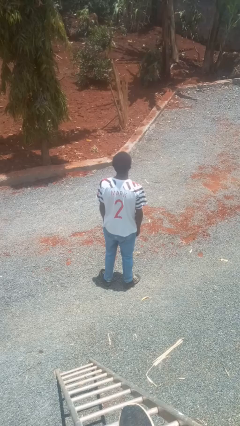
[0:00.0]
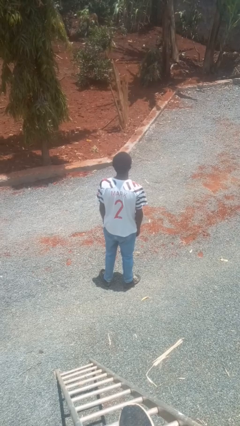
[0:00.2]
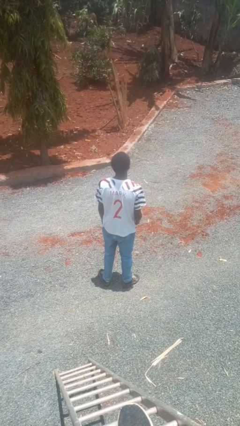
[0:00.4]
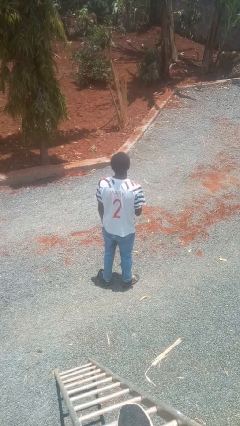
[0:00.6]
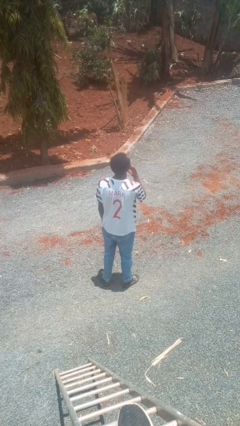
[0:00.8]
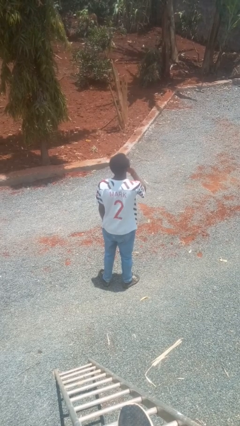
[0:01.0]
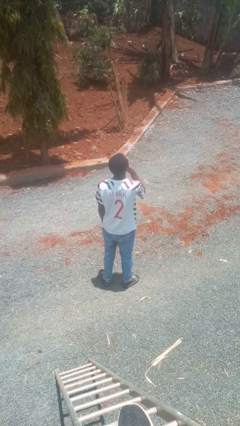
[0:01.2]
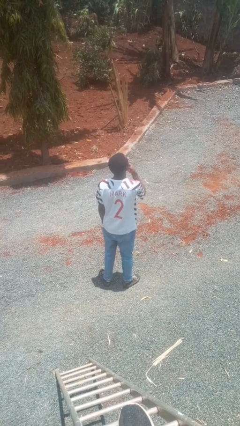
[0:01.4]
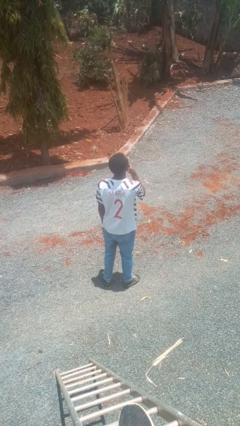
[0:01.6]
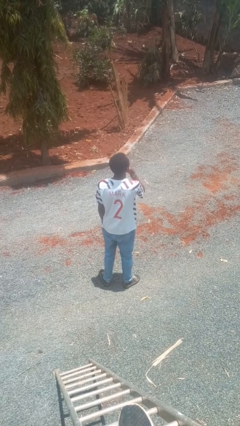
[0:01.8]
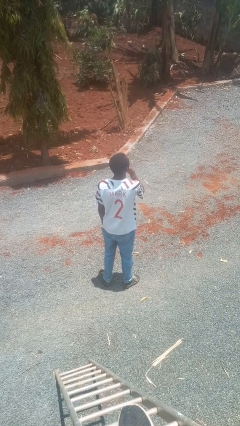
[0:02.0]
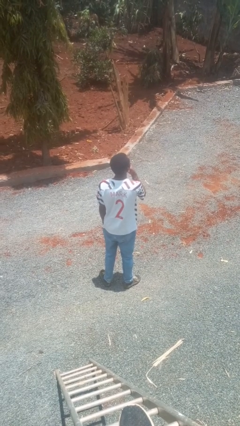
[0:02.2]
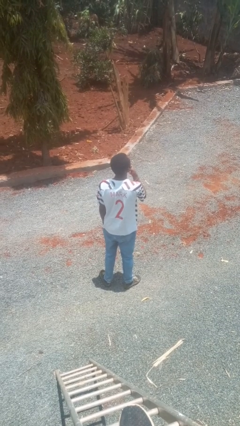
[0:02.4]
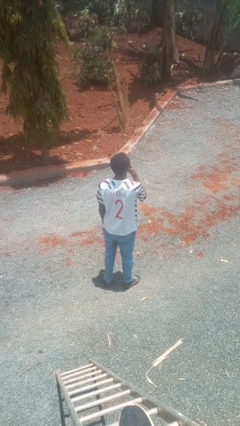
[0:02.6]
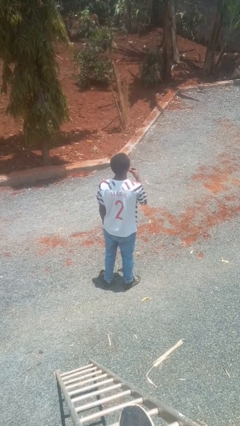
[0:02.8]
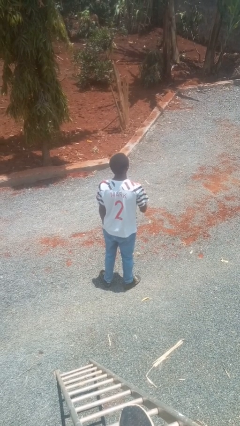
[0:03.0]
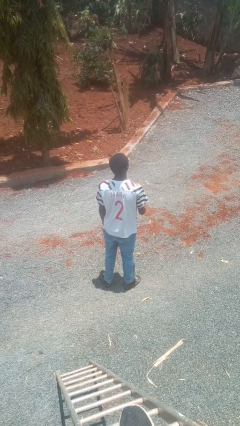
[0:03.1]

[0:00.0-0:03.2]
person strokes chin

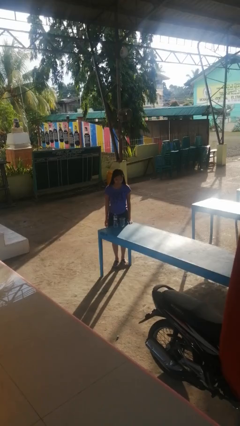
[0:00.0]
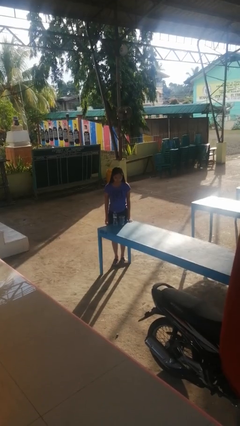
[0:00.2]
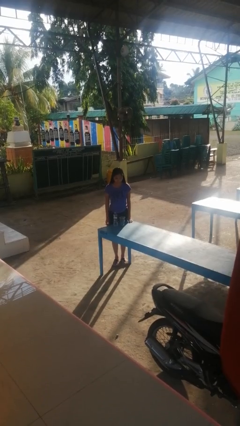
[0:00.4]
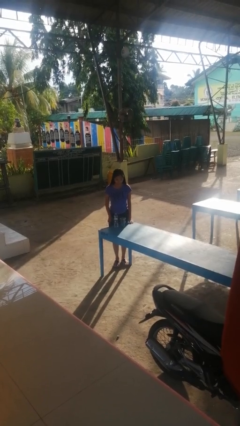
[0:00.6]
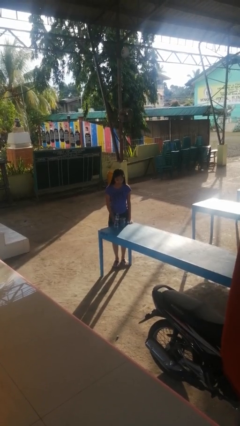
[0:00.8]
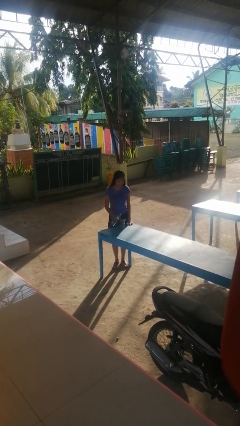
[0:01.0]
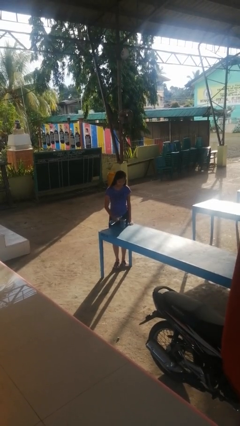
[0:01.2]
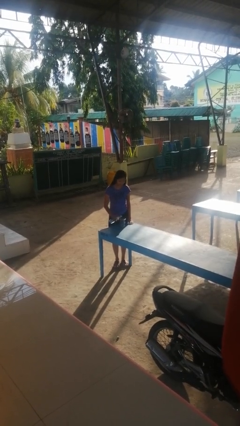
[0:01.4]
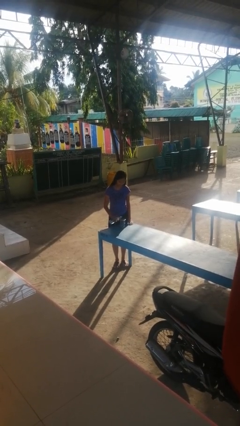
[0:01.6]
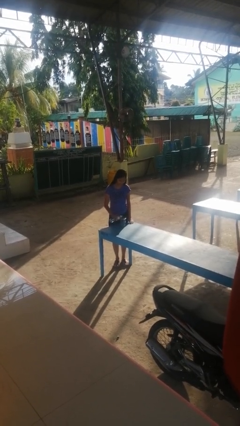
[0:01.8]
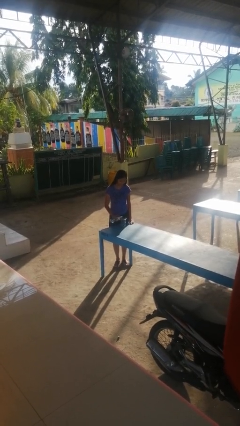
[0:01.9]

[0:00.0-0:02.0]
person pours liquid into cup

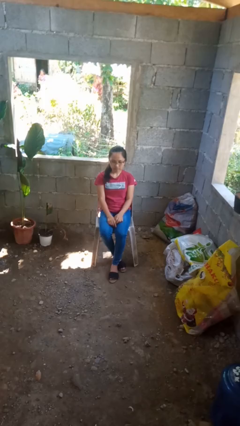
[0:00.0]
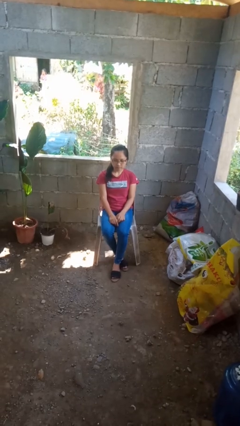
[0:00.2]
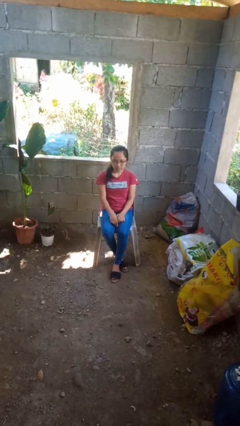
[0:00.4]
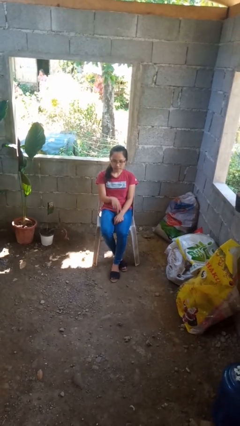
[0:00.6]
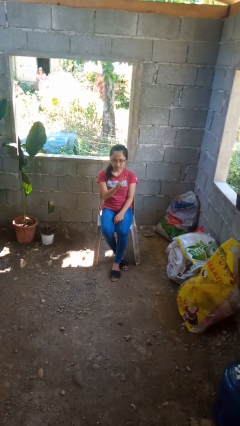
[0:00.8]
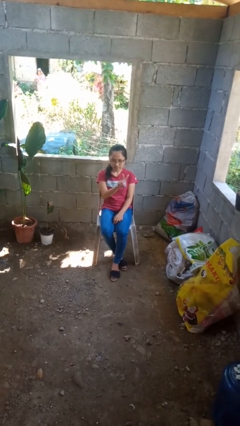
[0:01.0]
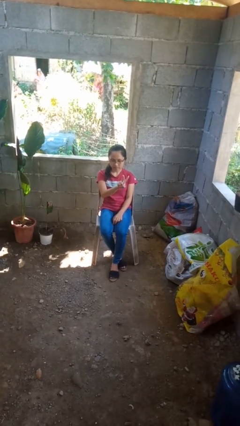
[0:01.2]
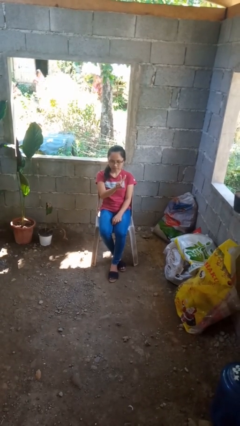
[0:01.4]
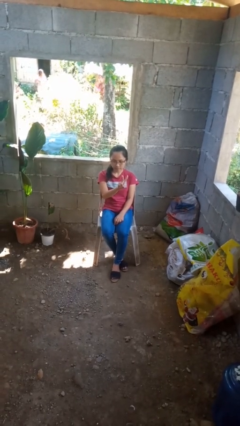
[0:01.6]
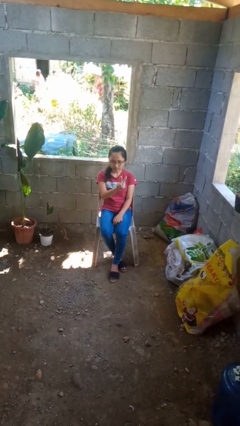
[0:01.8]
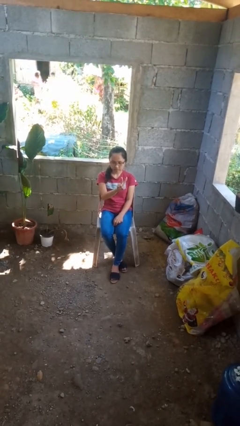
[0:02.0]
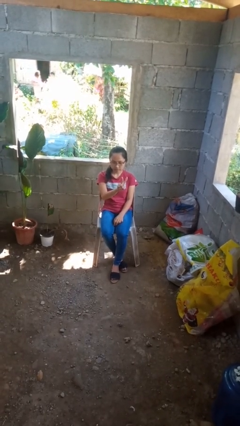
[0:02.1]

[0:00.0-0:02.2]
person gestures peace

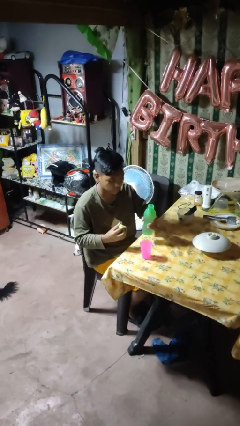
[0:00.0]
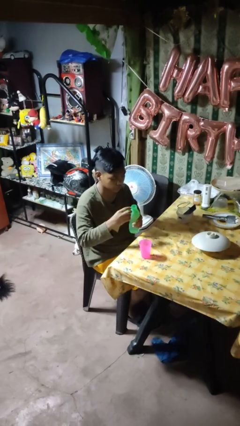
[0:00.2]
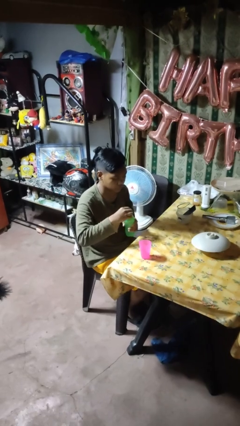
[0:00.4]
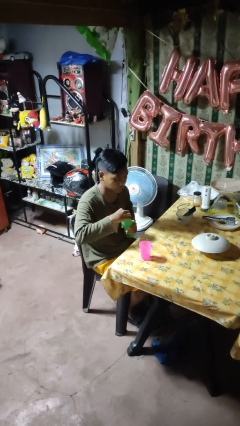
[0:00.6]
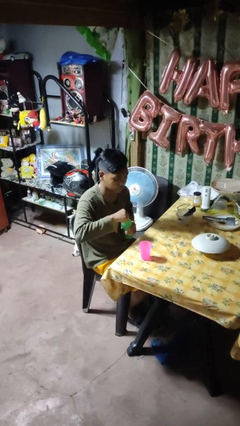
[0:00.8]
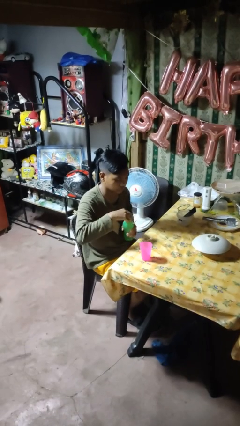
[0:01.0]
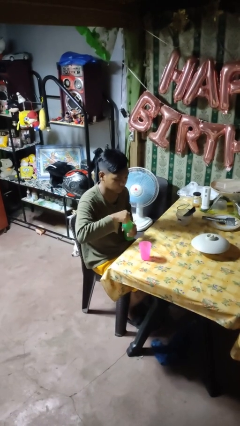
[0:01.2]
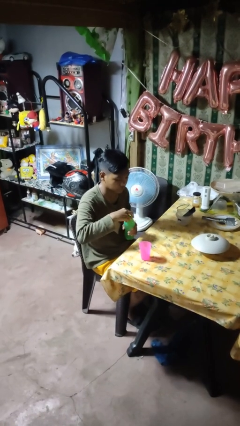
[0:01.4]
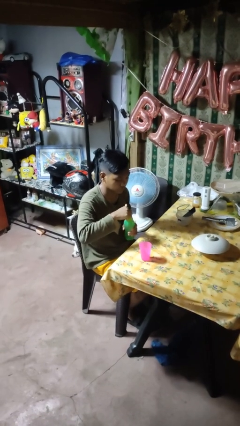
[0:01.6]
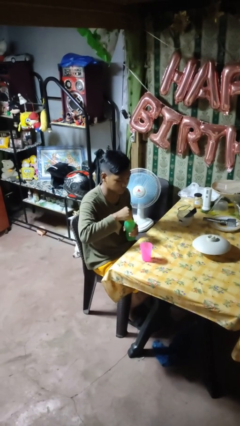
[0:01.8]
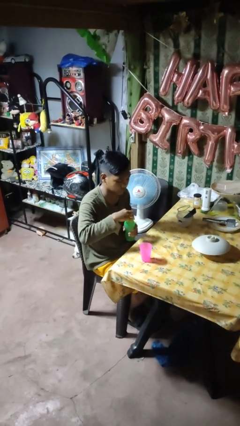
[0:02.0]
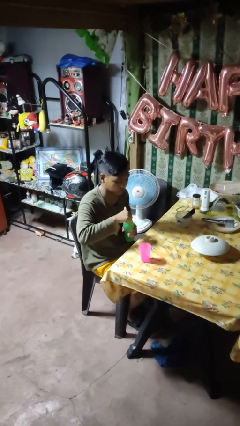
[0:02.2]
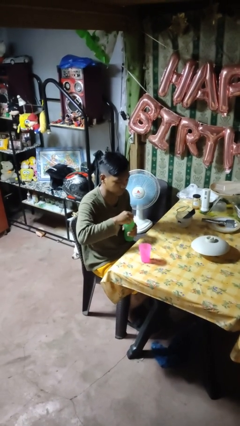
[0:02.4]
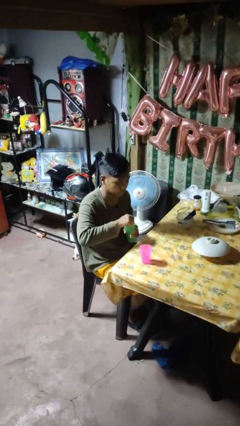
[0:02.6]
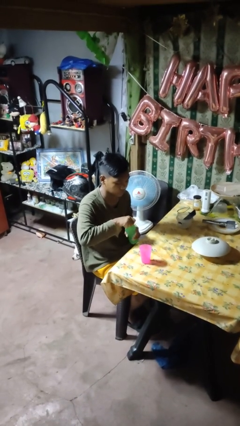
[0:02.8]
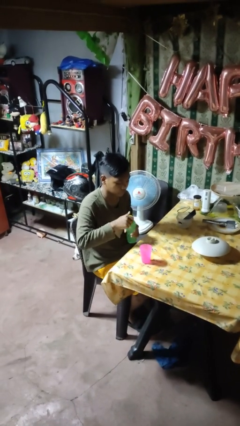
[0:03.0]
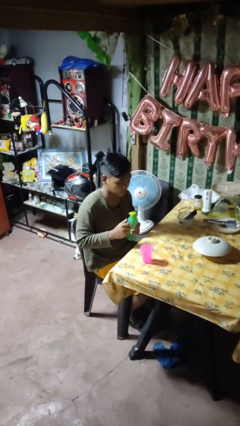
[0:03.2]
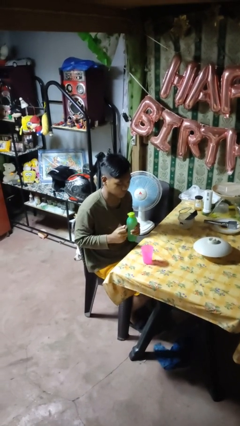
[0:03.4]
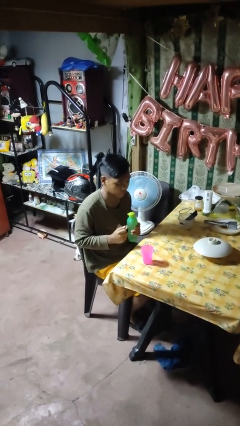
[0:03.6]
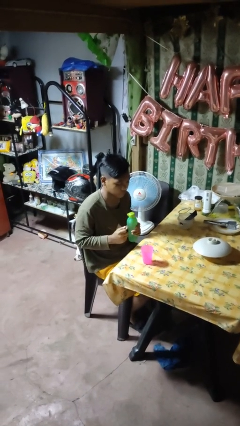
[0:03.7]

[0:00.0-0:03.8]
person screws lid to bottle

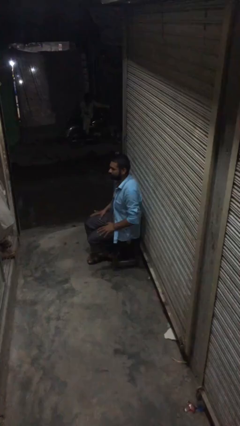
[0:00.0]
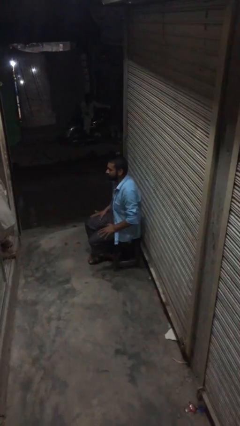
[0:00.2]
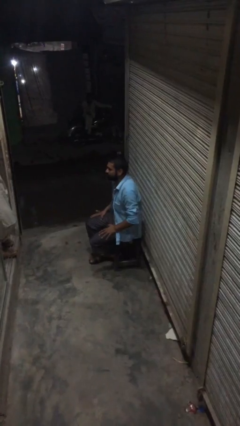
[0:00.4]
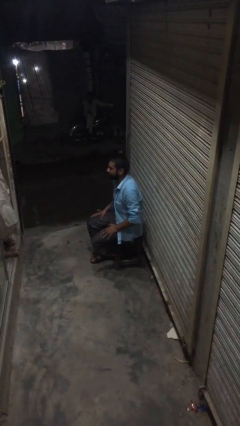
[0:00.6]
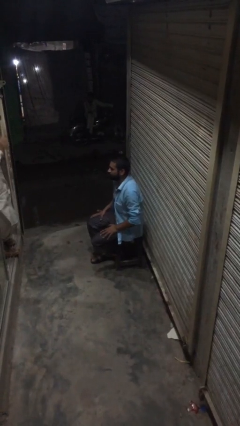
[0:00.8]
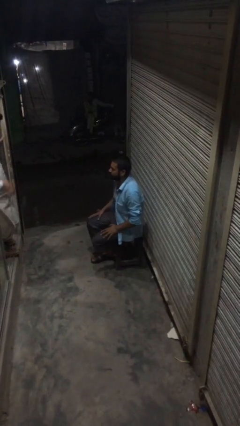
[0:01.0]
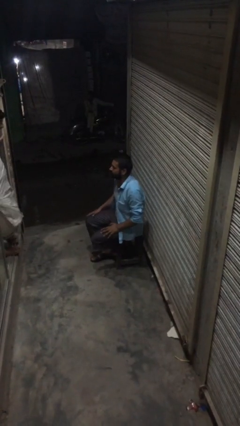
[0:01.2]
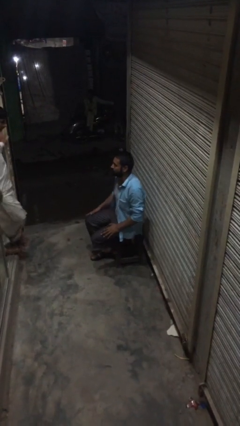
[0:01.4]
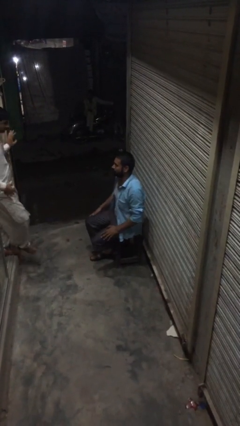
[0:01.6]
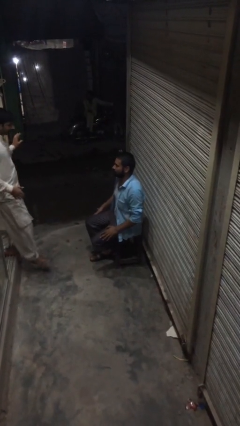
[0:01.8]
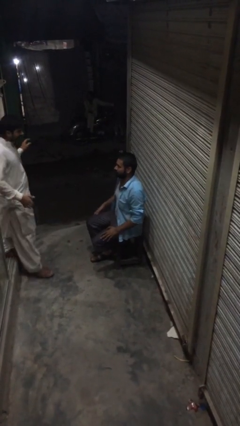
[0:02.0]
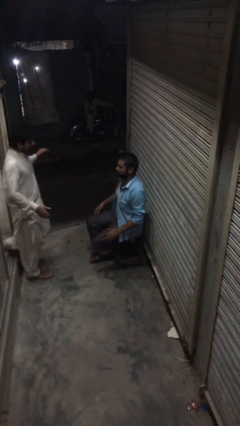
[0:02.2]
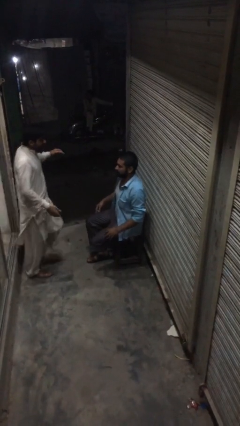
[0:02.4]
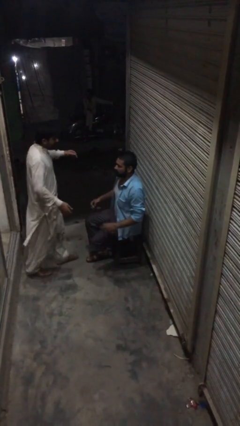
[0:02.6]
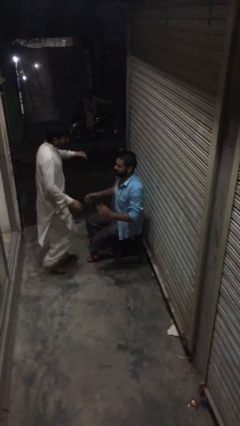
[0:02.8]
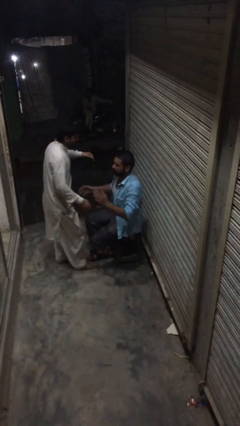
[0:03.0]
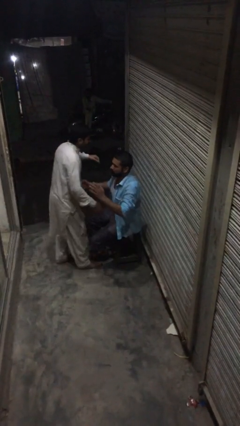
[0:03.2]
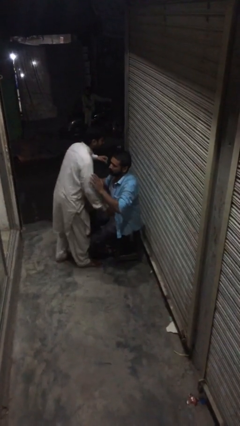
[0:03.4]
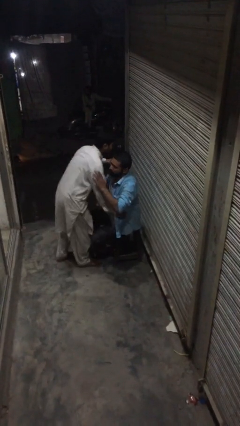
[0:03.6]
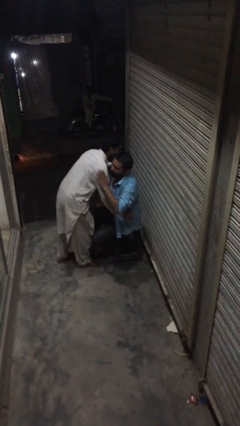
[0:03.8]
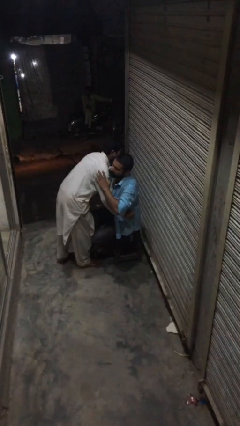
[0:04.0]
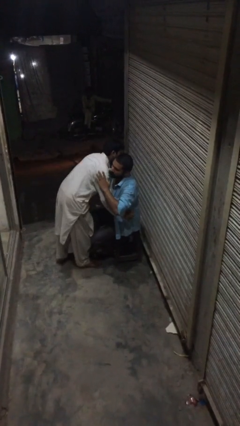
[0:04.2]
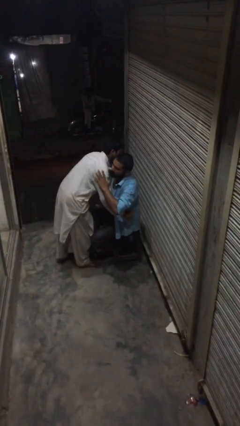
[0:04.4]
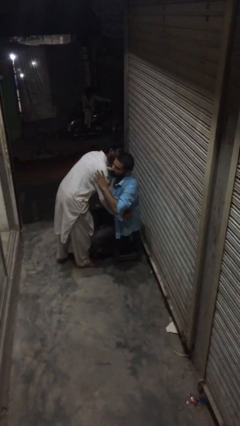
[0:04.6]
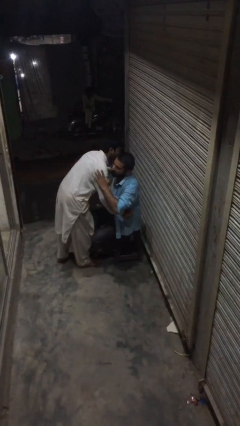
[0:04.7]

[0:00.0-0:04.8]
person embraces person

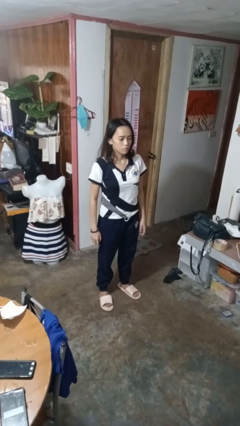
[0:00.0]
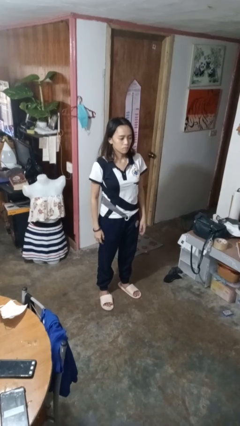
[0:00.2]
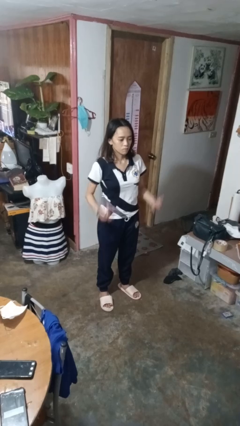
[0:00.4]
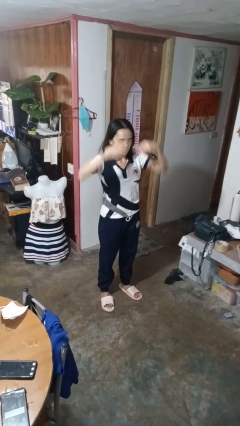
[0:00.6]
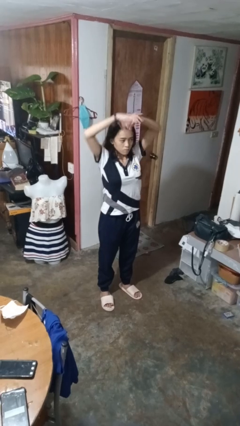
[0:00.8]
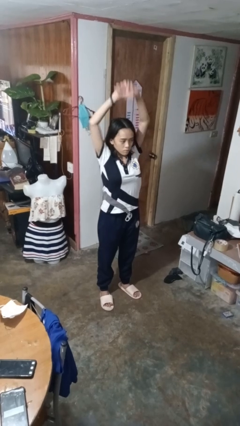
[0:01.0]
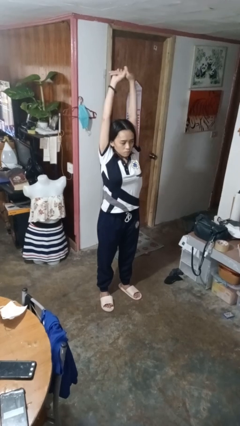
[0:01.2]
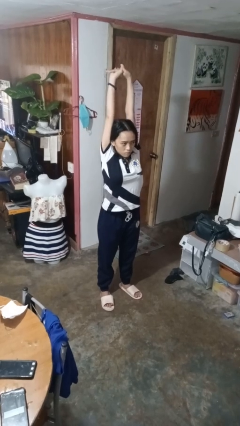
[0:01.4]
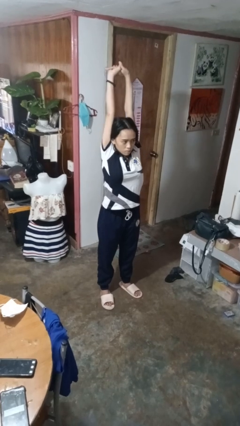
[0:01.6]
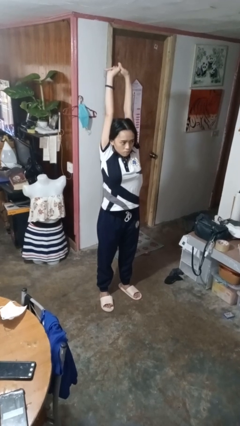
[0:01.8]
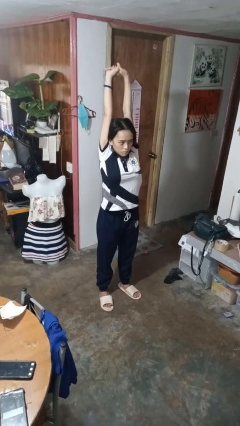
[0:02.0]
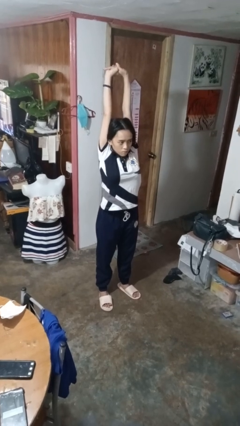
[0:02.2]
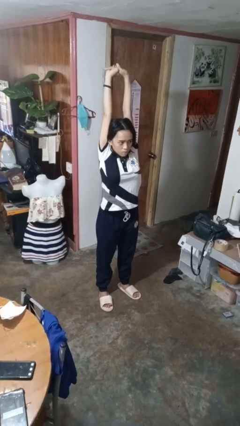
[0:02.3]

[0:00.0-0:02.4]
person stretches arms over head
